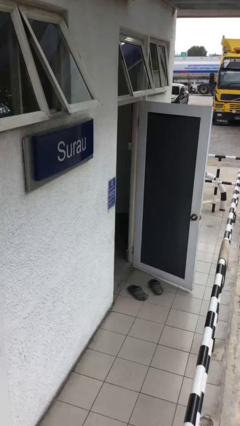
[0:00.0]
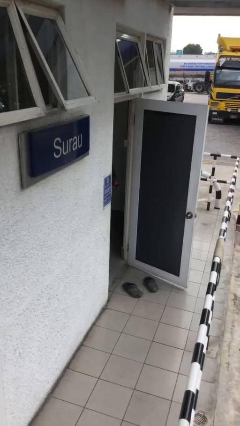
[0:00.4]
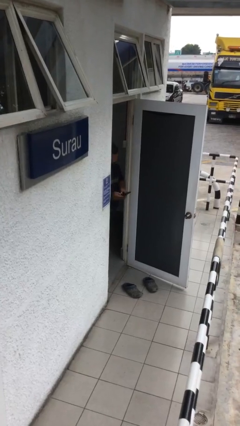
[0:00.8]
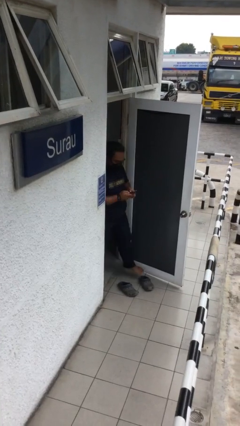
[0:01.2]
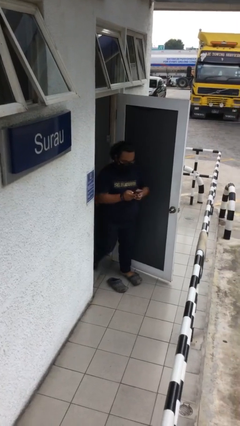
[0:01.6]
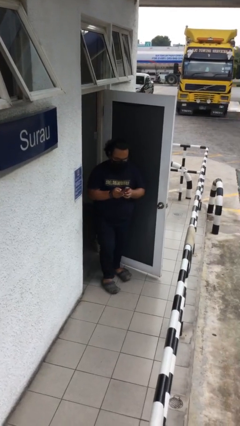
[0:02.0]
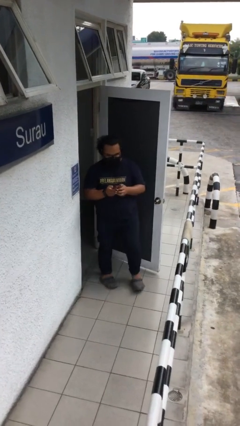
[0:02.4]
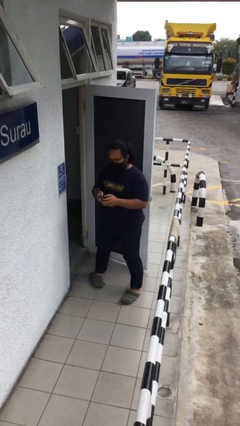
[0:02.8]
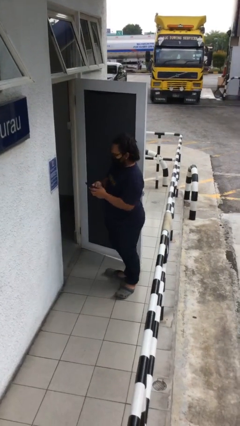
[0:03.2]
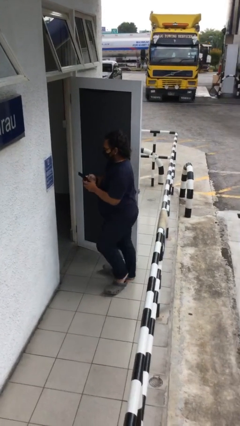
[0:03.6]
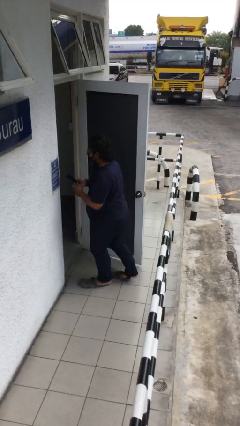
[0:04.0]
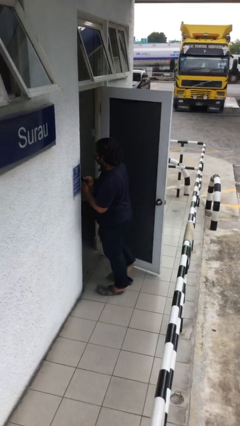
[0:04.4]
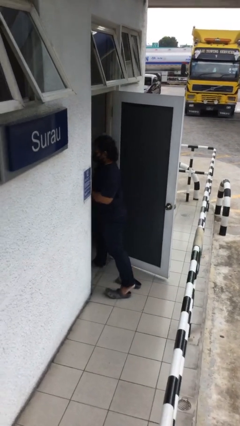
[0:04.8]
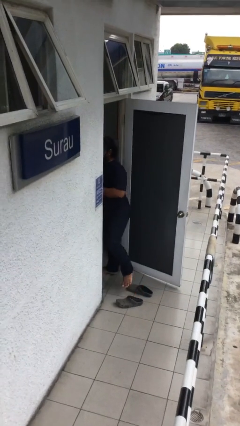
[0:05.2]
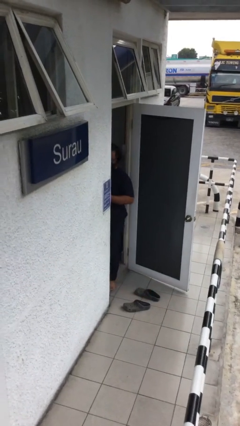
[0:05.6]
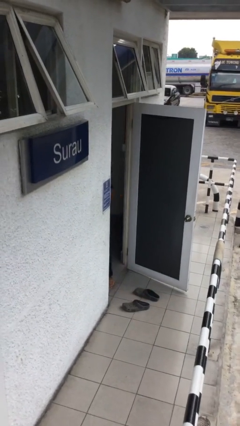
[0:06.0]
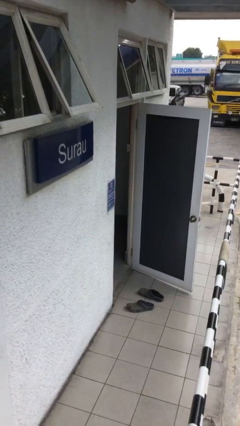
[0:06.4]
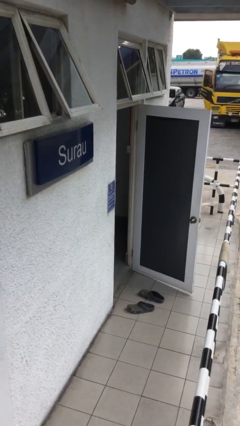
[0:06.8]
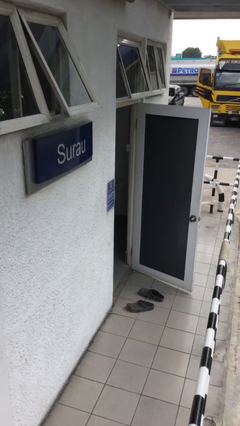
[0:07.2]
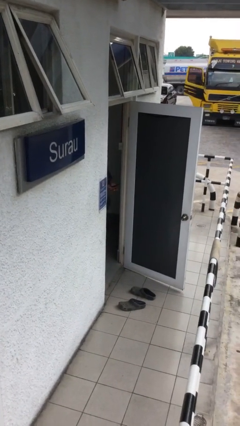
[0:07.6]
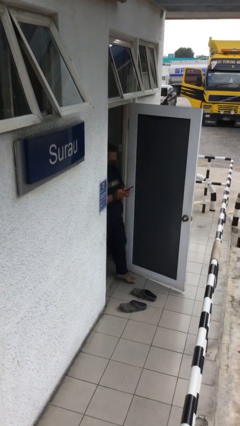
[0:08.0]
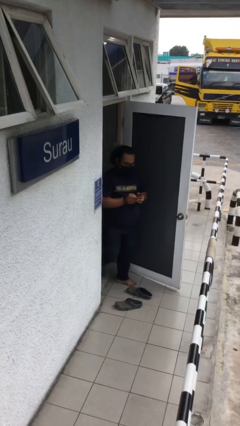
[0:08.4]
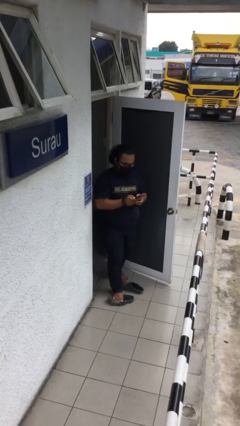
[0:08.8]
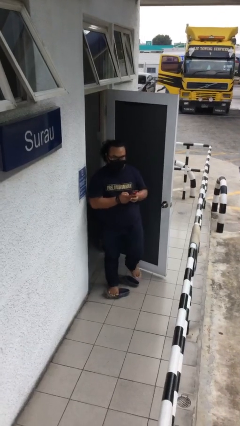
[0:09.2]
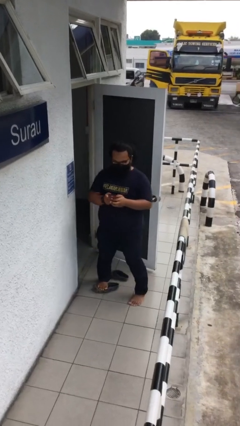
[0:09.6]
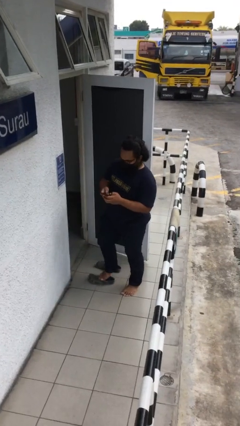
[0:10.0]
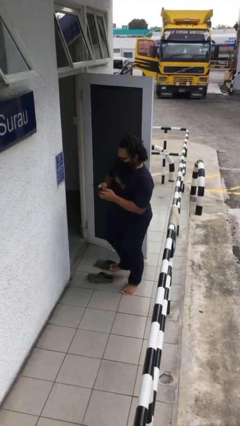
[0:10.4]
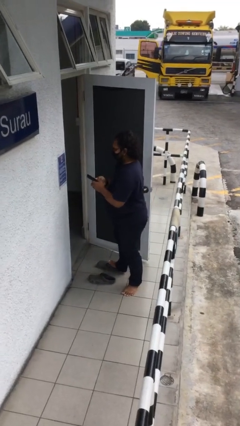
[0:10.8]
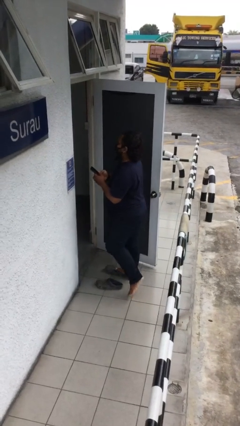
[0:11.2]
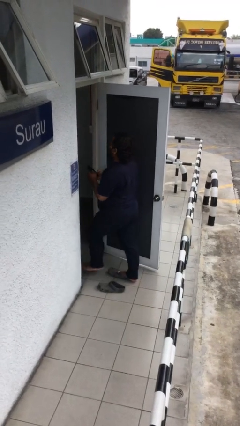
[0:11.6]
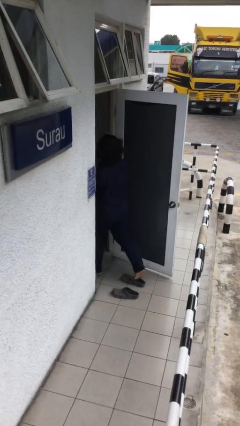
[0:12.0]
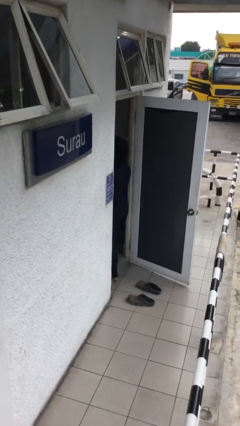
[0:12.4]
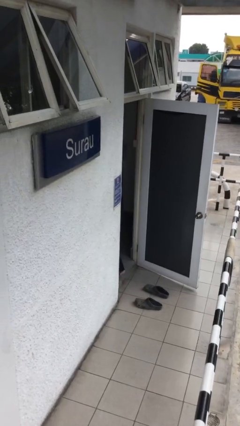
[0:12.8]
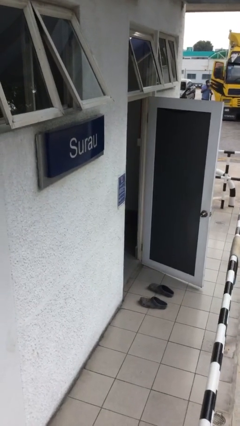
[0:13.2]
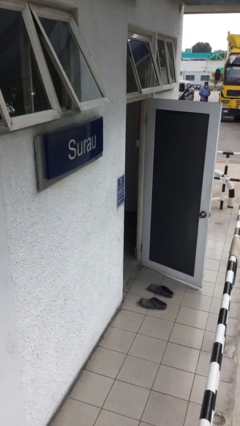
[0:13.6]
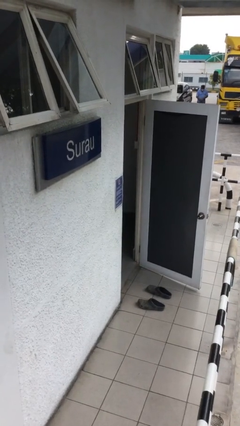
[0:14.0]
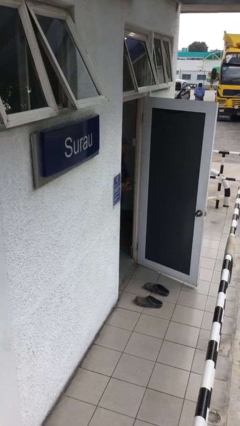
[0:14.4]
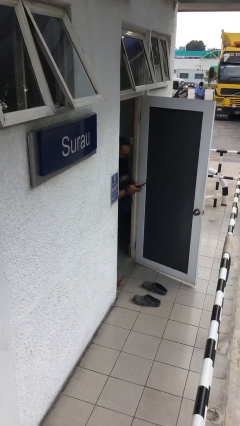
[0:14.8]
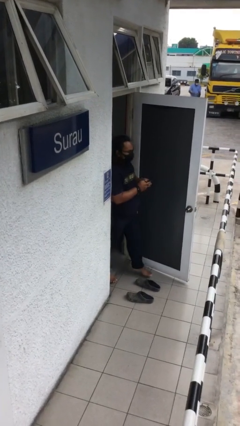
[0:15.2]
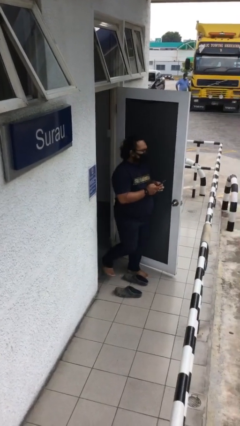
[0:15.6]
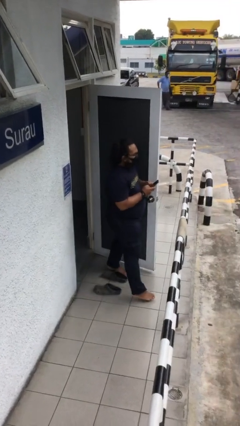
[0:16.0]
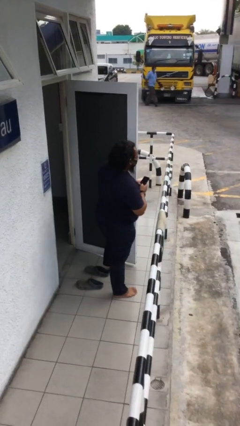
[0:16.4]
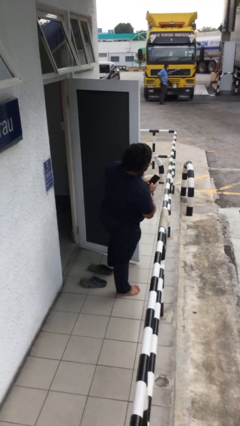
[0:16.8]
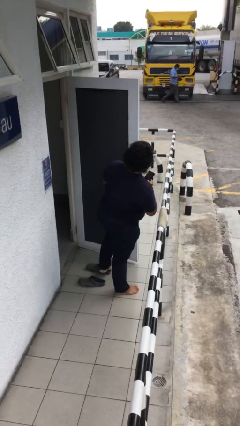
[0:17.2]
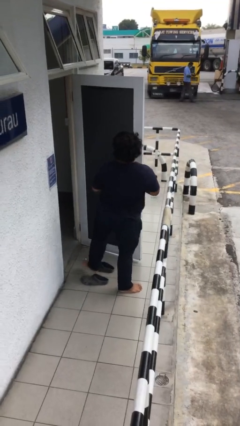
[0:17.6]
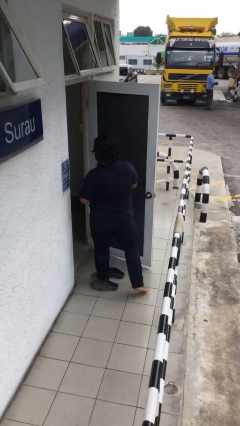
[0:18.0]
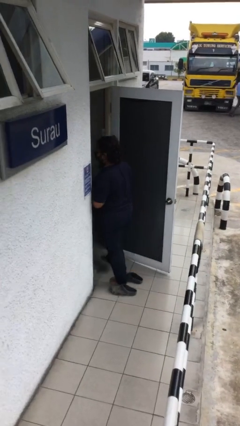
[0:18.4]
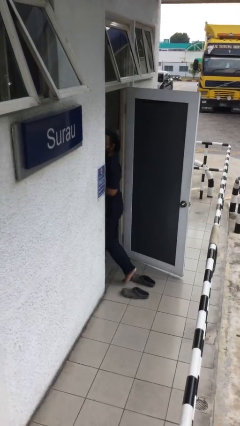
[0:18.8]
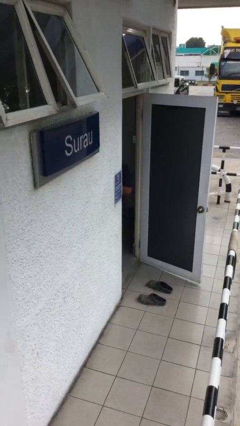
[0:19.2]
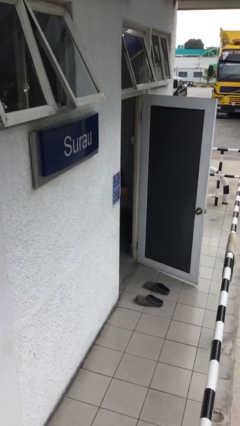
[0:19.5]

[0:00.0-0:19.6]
person texts on phone

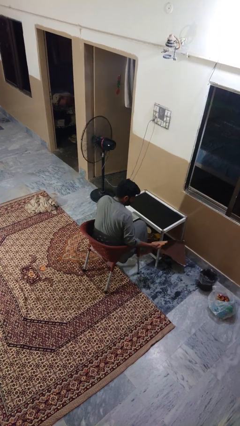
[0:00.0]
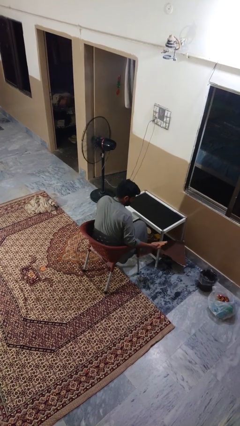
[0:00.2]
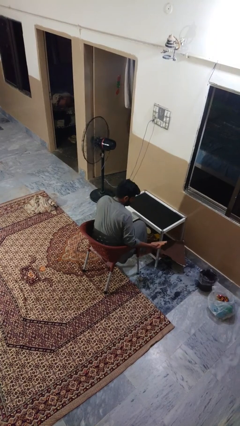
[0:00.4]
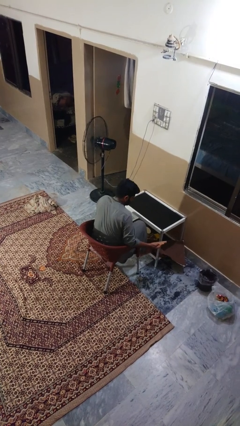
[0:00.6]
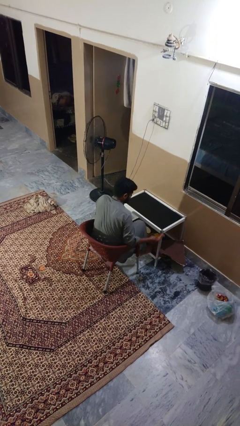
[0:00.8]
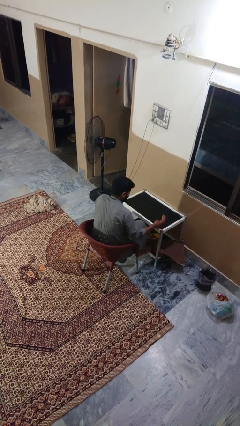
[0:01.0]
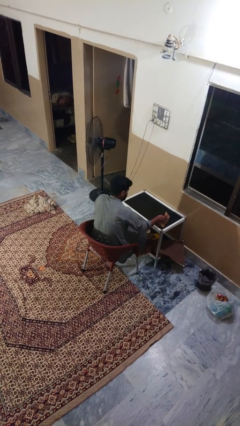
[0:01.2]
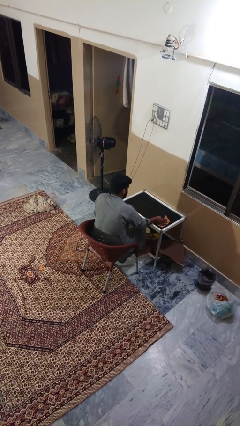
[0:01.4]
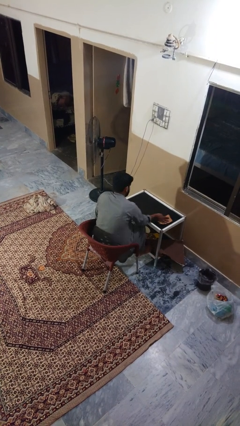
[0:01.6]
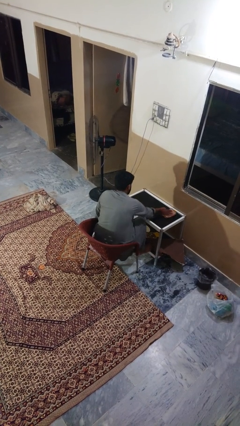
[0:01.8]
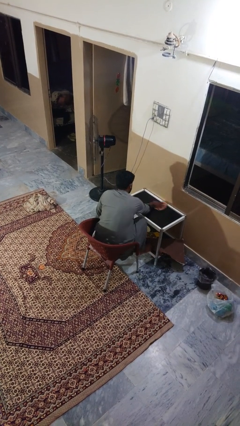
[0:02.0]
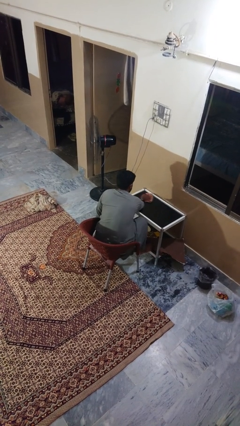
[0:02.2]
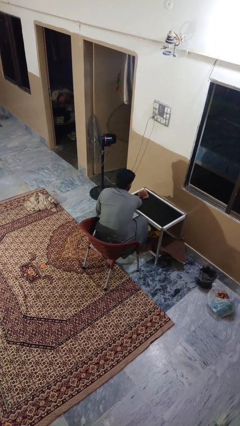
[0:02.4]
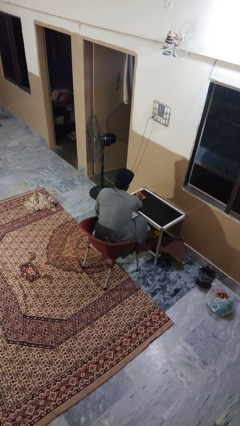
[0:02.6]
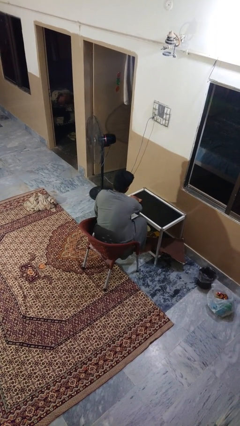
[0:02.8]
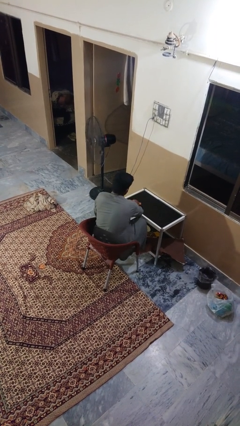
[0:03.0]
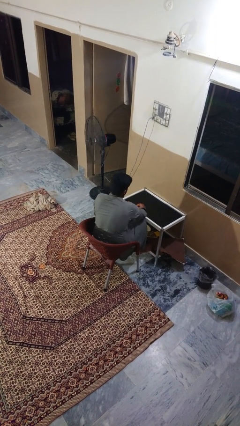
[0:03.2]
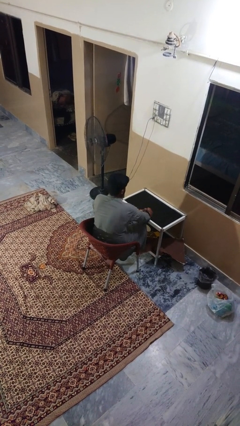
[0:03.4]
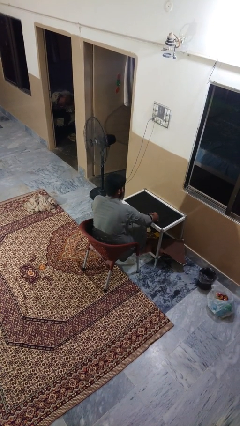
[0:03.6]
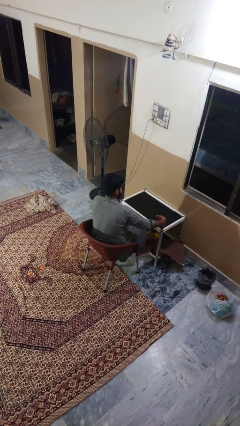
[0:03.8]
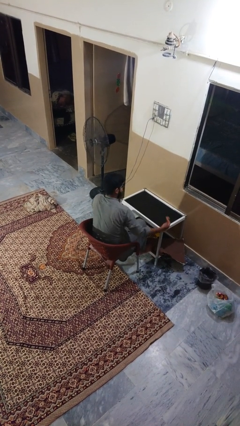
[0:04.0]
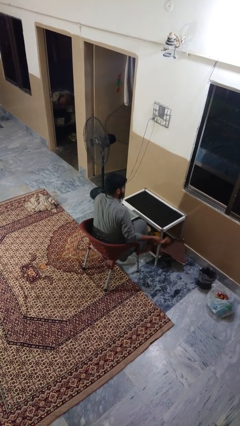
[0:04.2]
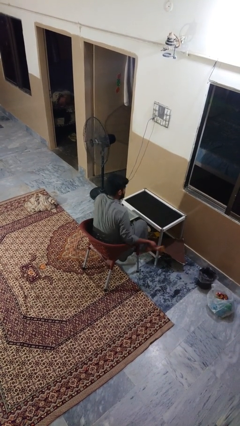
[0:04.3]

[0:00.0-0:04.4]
person cleans table with rag

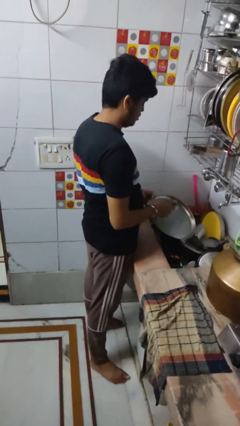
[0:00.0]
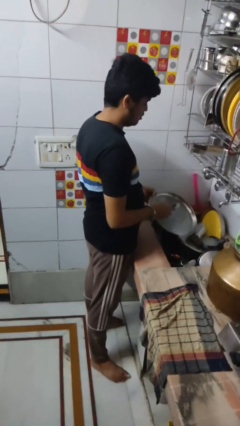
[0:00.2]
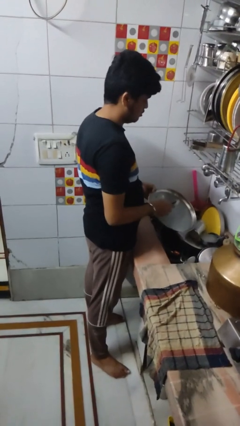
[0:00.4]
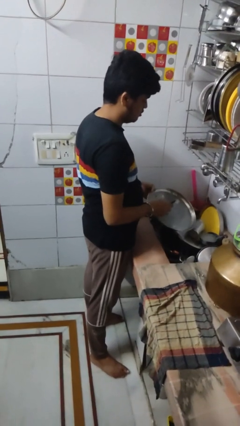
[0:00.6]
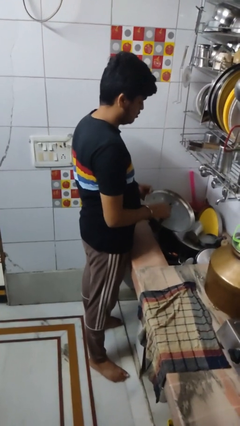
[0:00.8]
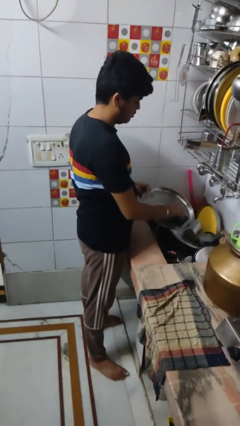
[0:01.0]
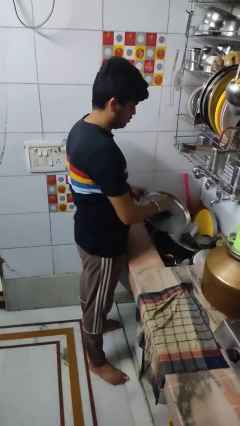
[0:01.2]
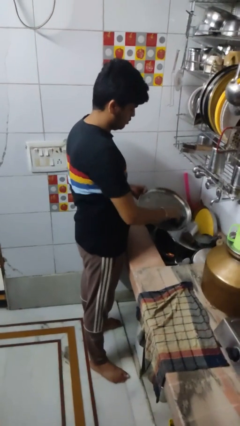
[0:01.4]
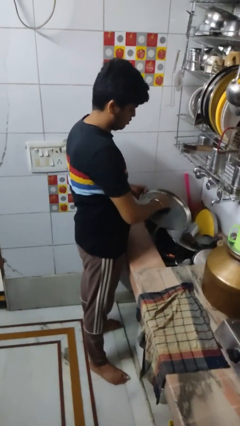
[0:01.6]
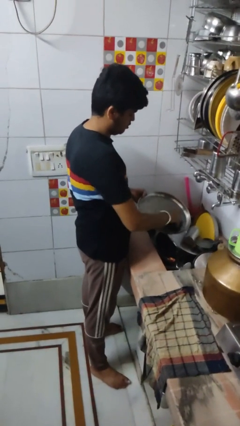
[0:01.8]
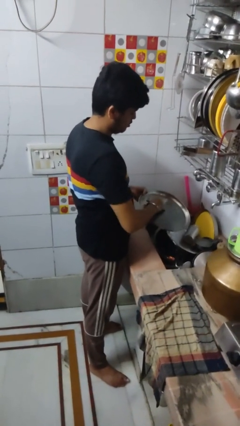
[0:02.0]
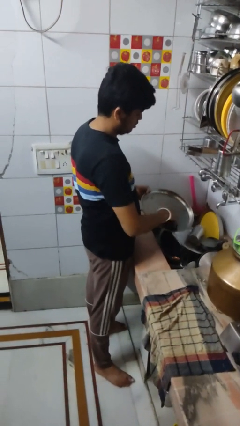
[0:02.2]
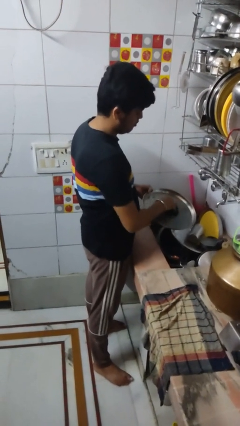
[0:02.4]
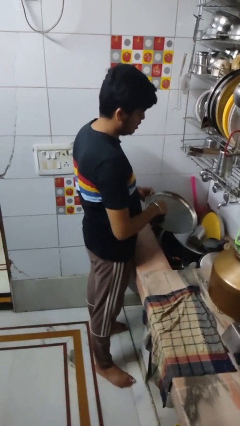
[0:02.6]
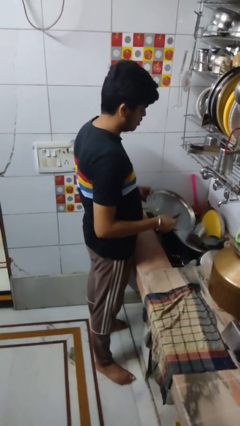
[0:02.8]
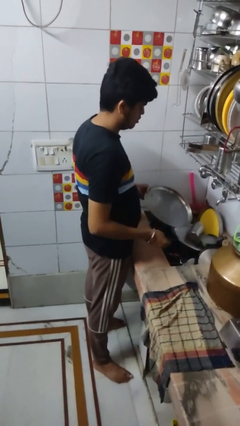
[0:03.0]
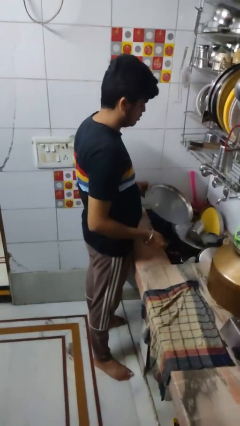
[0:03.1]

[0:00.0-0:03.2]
person washes dish
